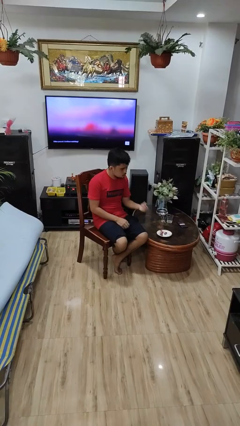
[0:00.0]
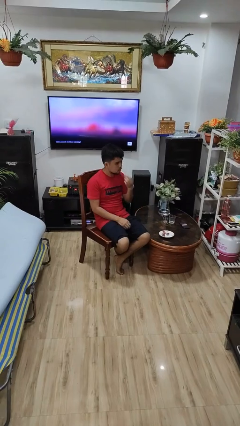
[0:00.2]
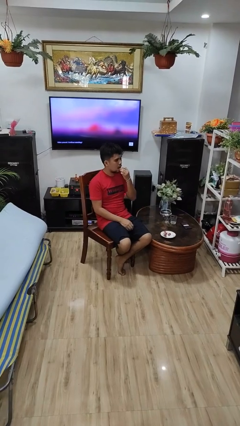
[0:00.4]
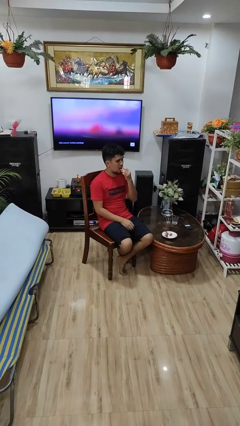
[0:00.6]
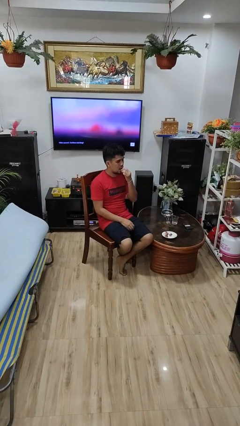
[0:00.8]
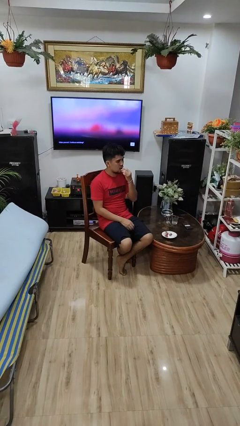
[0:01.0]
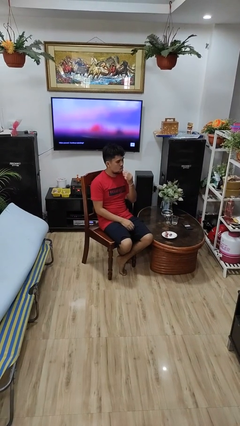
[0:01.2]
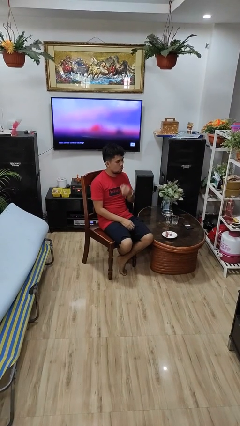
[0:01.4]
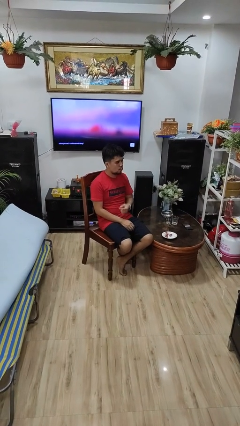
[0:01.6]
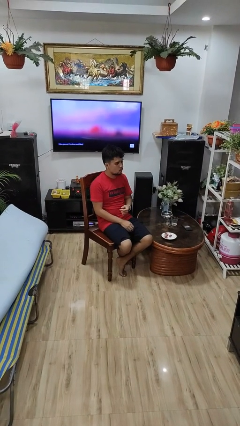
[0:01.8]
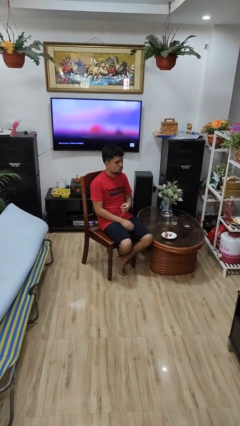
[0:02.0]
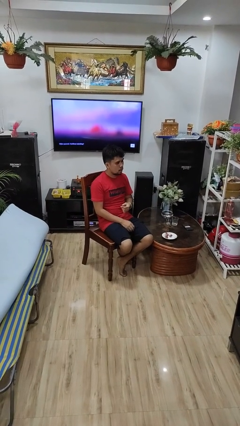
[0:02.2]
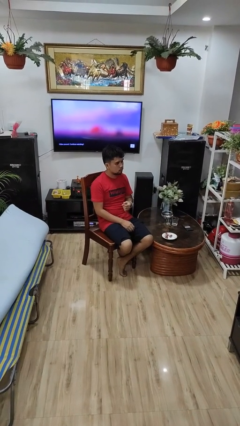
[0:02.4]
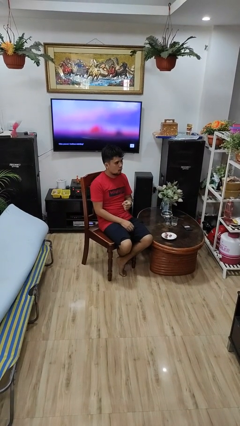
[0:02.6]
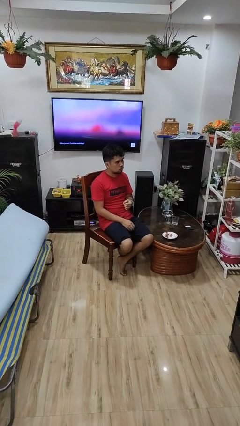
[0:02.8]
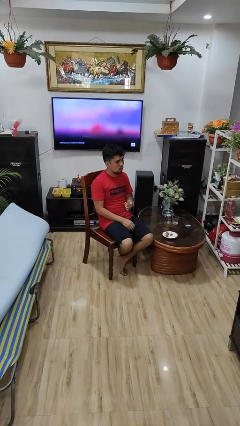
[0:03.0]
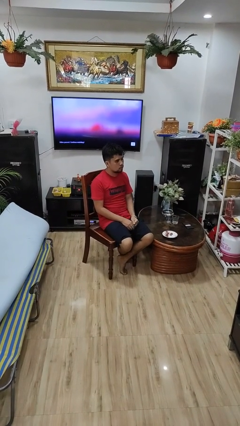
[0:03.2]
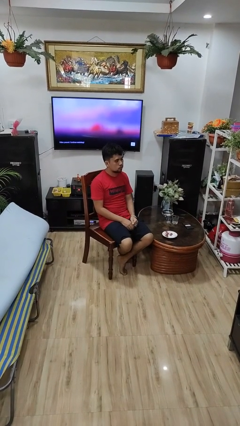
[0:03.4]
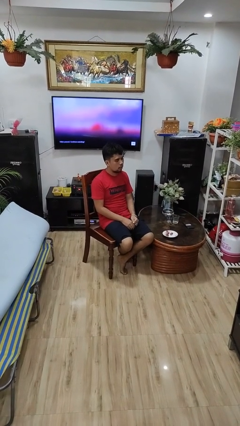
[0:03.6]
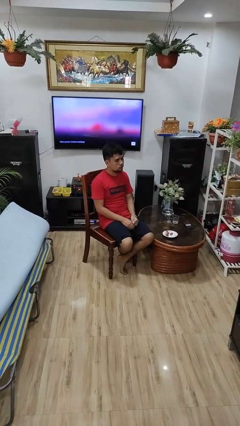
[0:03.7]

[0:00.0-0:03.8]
person eats with hands

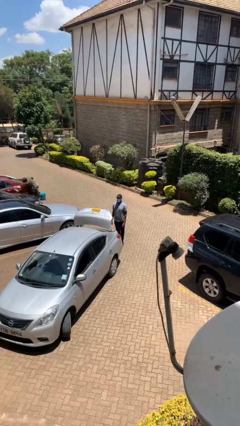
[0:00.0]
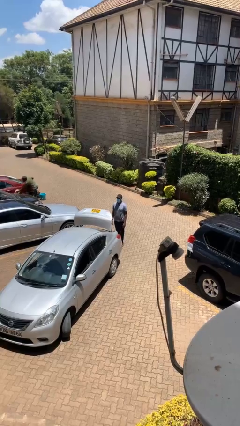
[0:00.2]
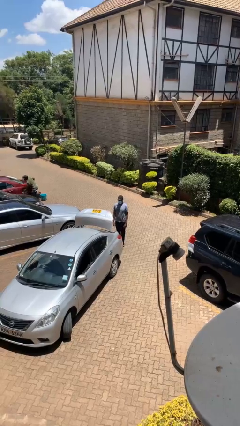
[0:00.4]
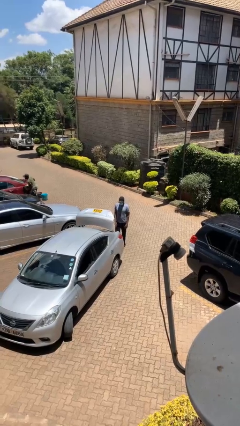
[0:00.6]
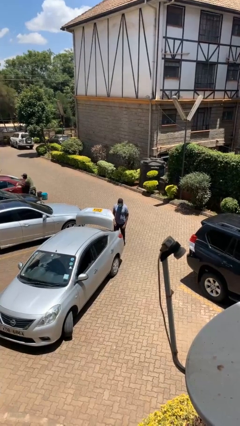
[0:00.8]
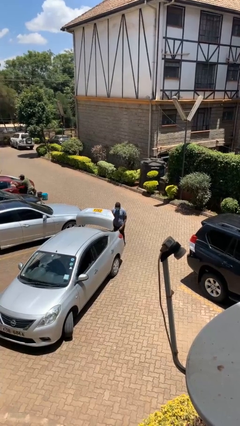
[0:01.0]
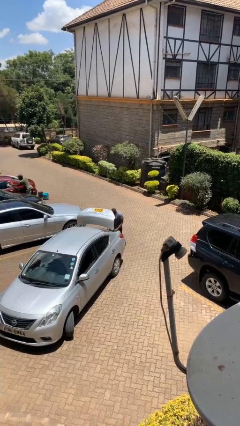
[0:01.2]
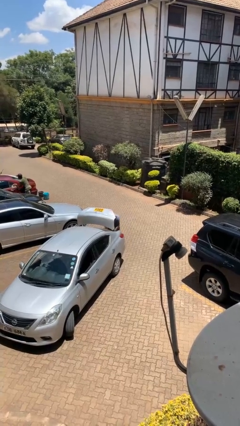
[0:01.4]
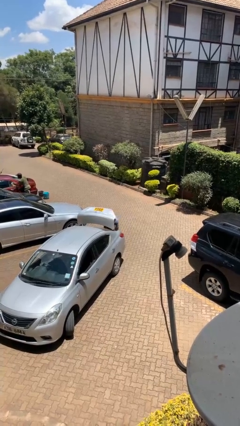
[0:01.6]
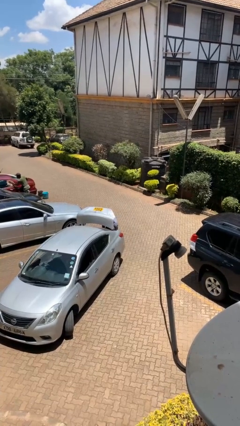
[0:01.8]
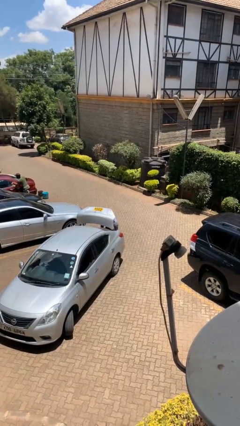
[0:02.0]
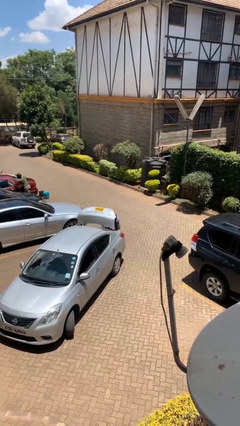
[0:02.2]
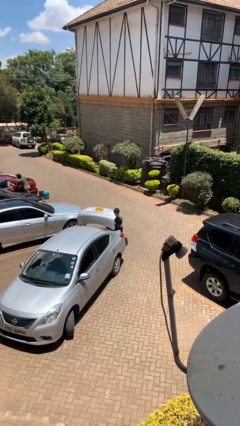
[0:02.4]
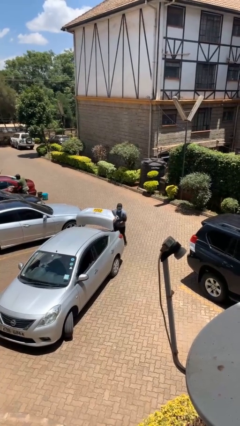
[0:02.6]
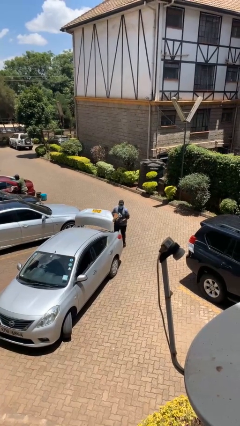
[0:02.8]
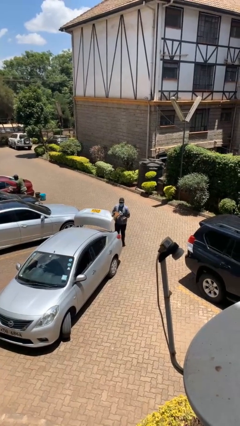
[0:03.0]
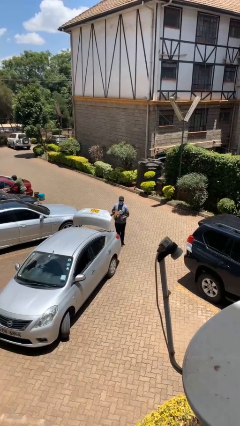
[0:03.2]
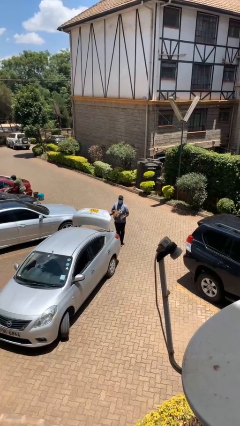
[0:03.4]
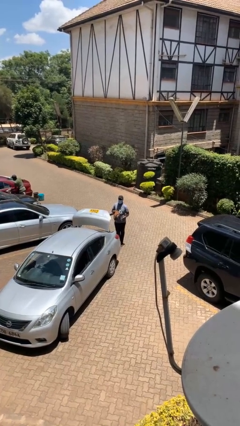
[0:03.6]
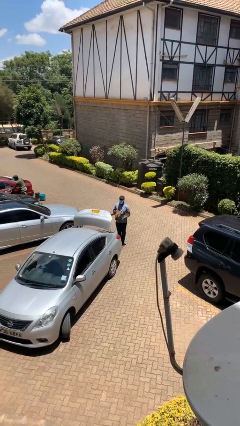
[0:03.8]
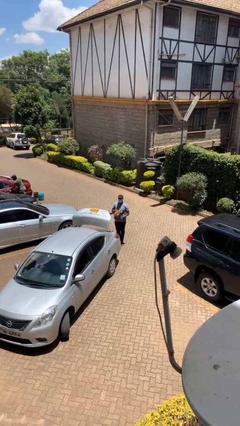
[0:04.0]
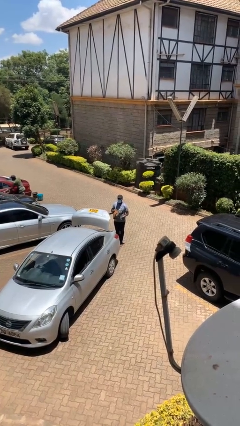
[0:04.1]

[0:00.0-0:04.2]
person unloads car

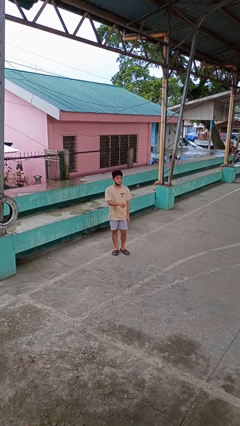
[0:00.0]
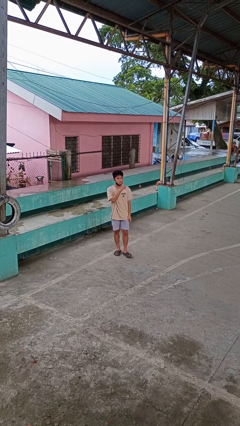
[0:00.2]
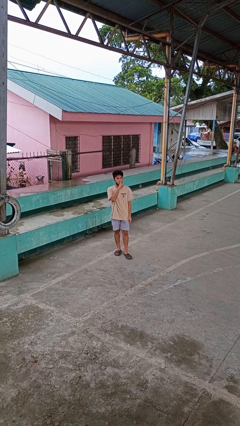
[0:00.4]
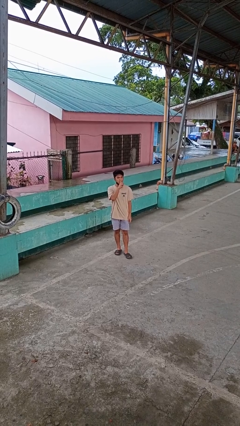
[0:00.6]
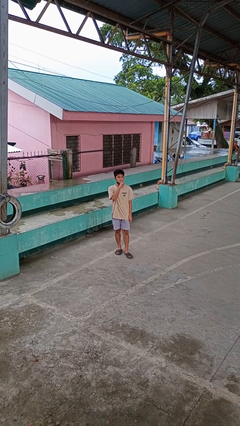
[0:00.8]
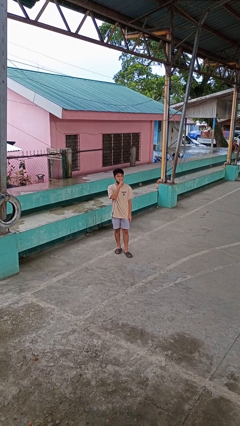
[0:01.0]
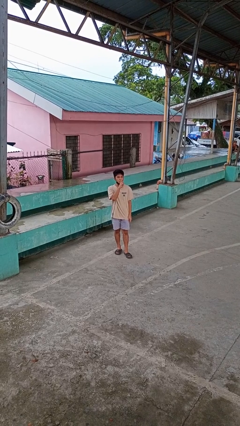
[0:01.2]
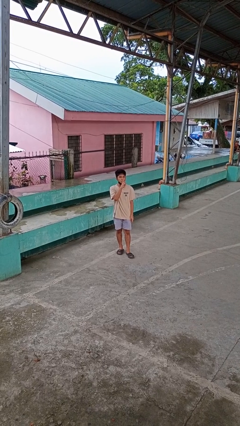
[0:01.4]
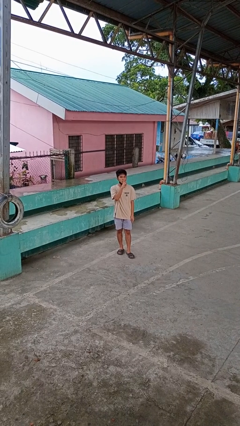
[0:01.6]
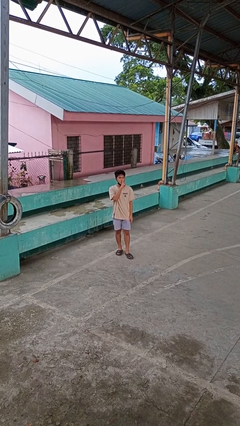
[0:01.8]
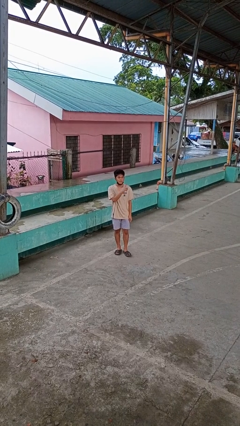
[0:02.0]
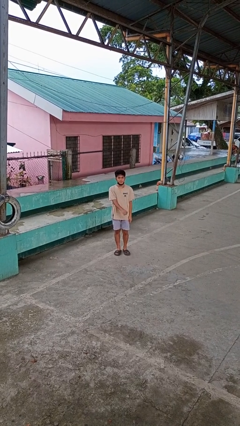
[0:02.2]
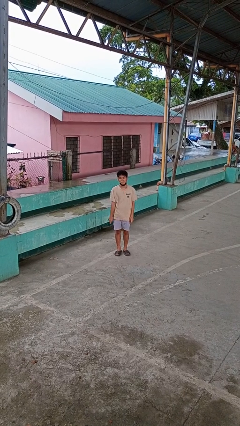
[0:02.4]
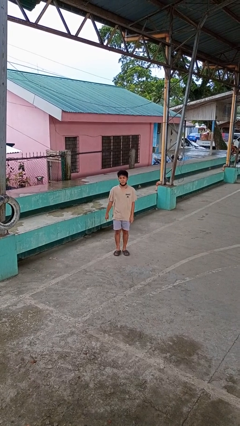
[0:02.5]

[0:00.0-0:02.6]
person gestures be quiet

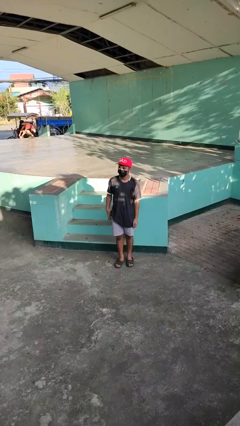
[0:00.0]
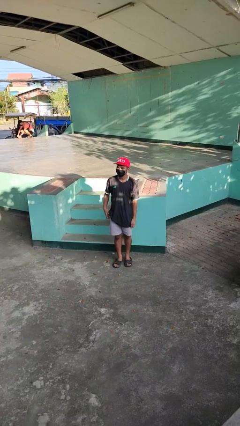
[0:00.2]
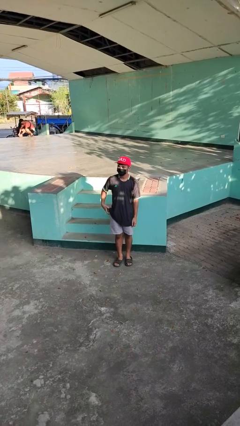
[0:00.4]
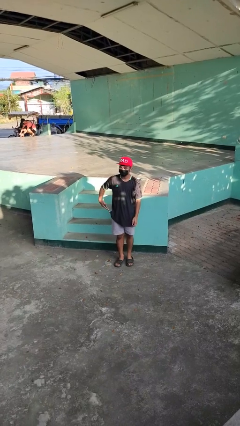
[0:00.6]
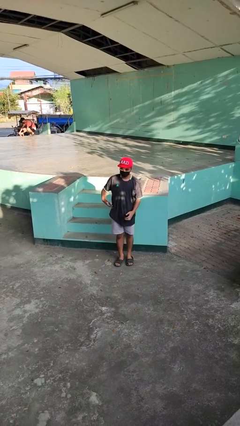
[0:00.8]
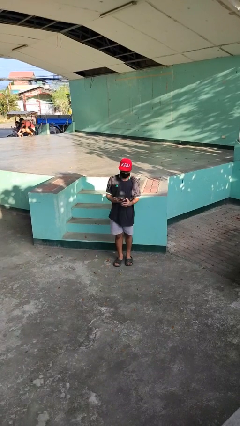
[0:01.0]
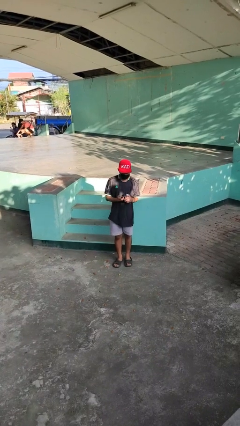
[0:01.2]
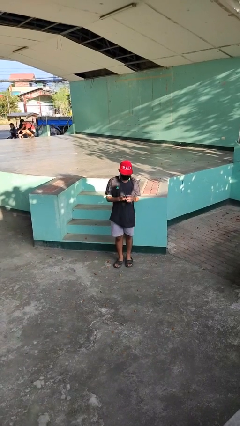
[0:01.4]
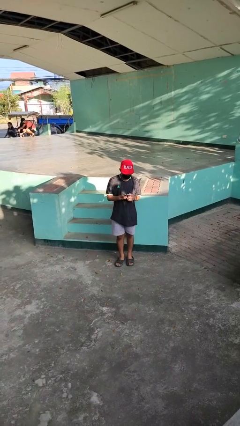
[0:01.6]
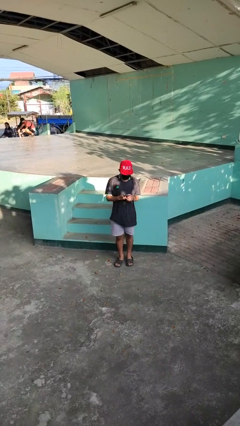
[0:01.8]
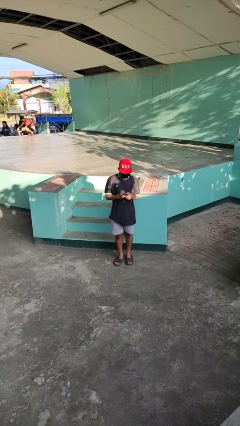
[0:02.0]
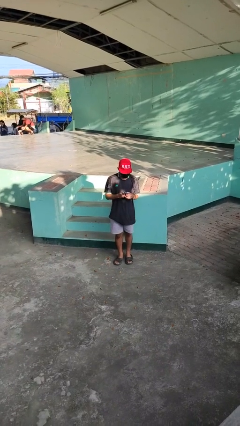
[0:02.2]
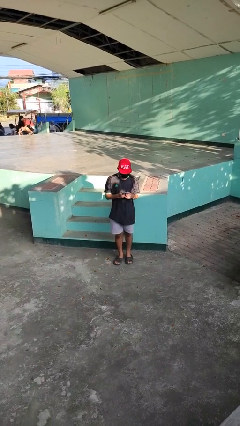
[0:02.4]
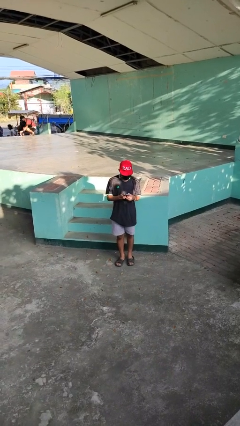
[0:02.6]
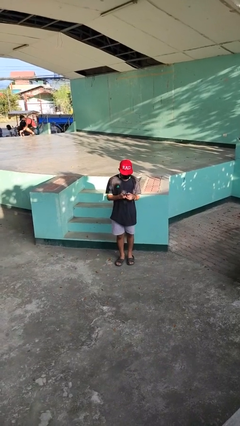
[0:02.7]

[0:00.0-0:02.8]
person takes phone from pocket

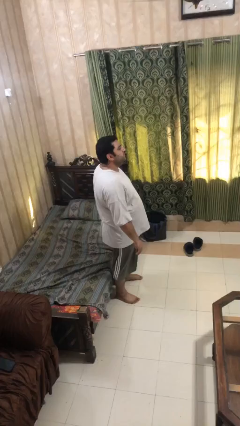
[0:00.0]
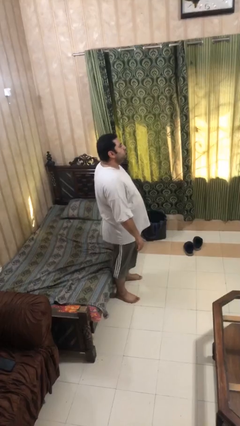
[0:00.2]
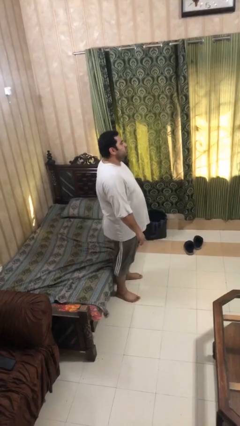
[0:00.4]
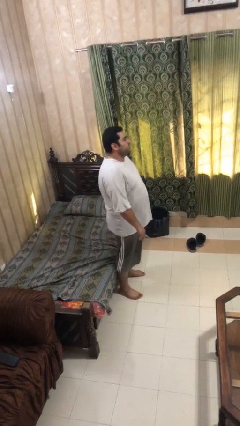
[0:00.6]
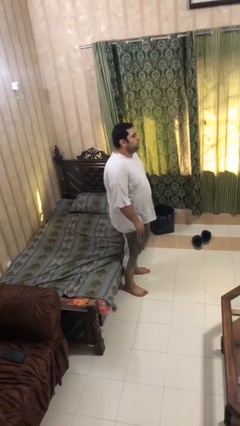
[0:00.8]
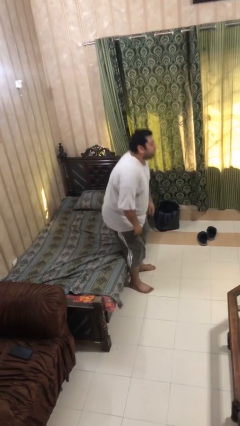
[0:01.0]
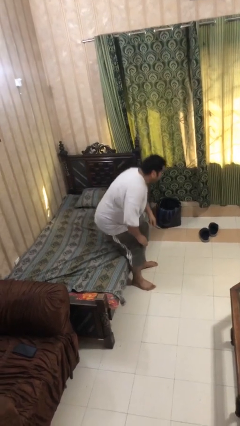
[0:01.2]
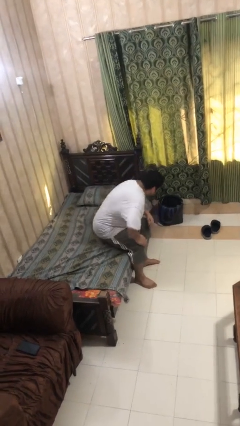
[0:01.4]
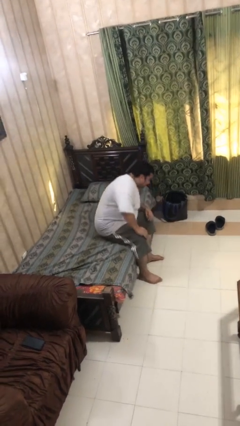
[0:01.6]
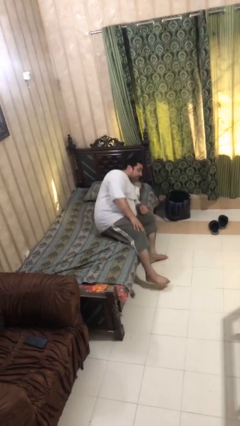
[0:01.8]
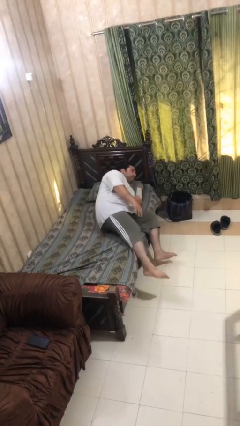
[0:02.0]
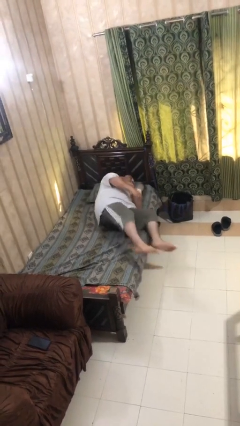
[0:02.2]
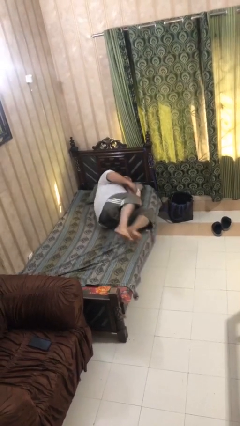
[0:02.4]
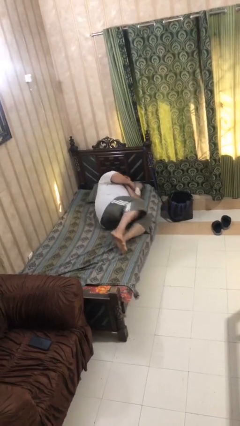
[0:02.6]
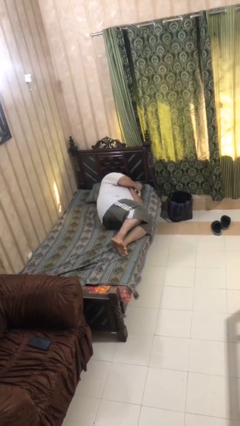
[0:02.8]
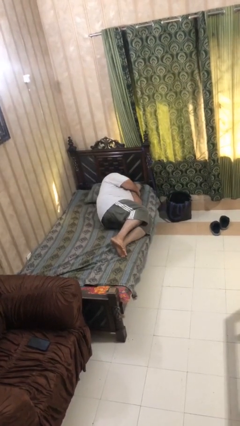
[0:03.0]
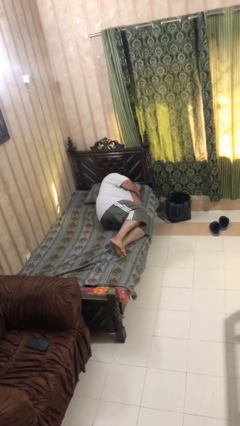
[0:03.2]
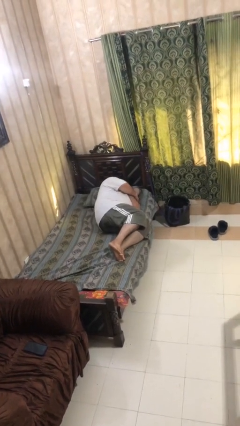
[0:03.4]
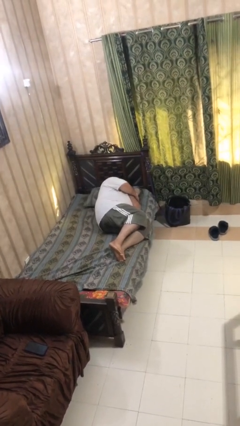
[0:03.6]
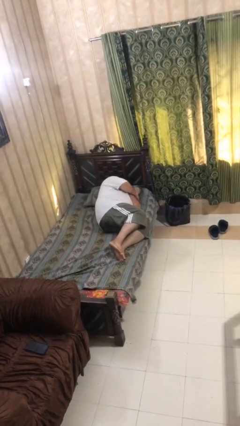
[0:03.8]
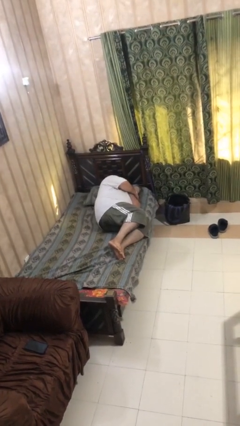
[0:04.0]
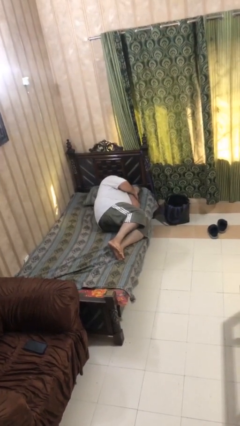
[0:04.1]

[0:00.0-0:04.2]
person lies down on bed
